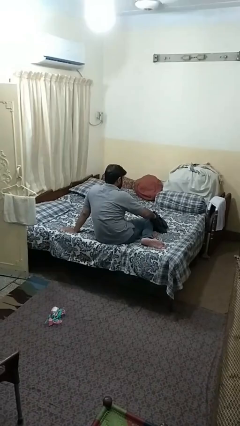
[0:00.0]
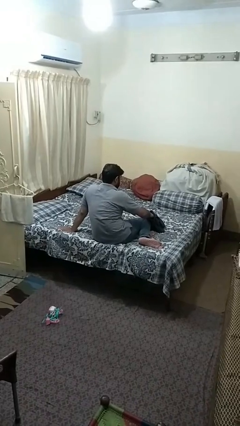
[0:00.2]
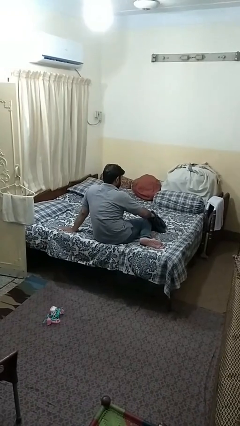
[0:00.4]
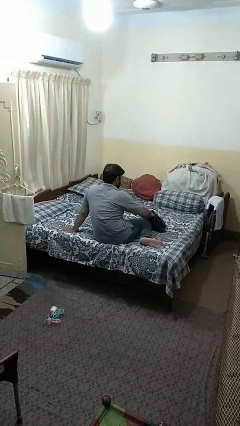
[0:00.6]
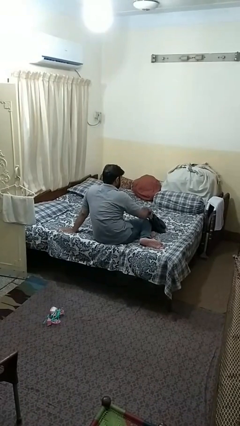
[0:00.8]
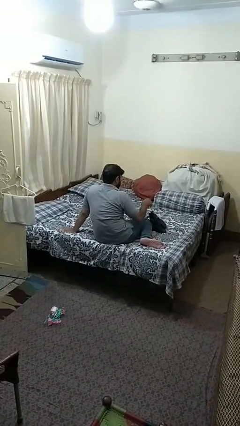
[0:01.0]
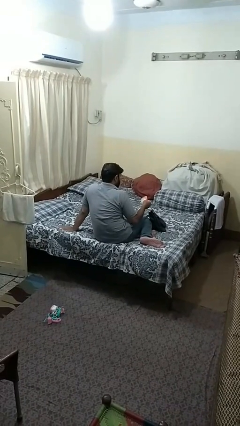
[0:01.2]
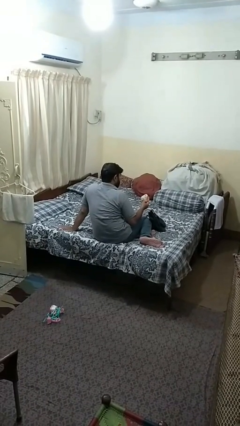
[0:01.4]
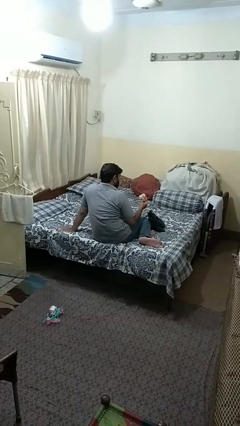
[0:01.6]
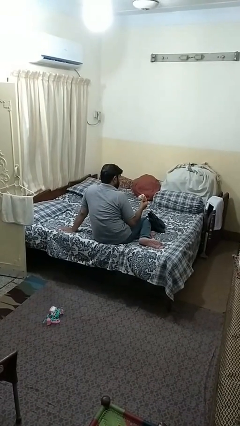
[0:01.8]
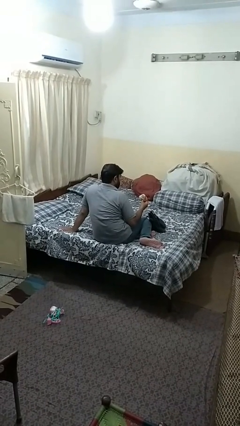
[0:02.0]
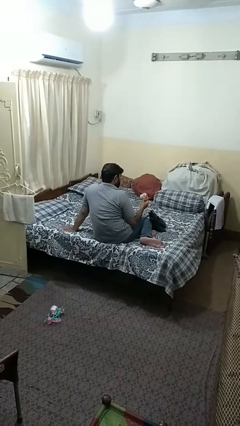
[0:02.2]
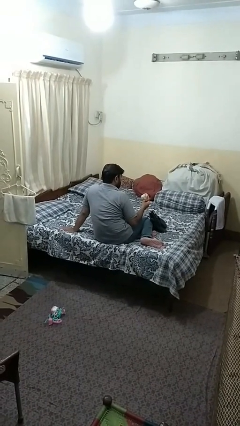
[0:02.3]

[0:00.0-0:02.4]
person takes object from purse

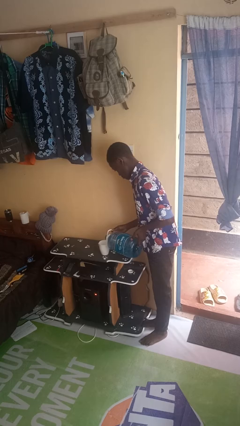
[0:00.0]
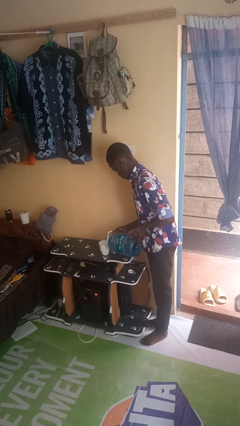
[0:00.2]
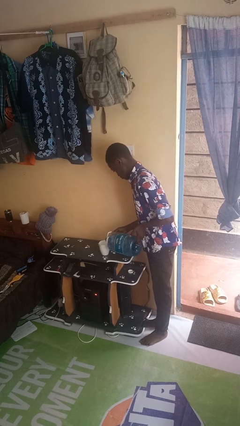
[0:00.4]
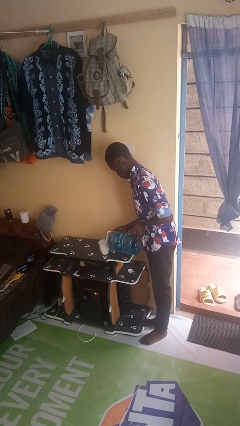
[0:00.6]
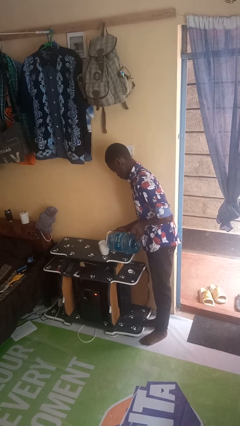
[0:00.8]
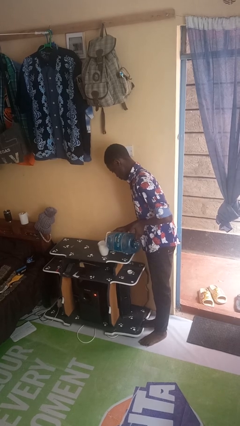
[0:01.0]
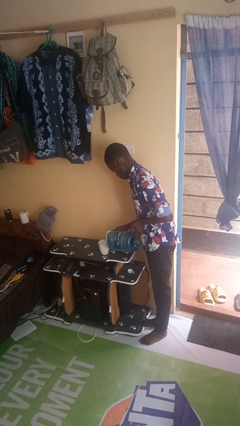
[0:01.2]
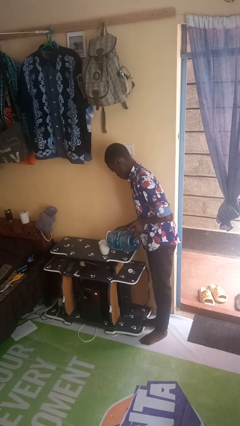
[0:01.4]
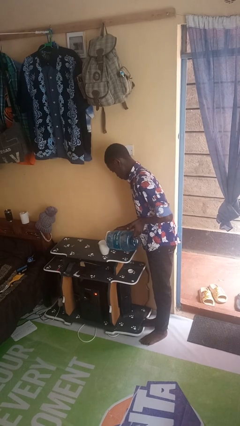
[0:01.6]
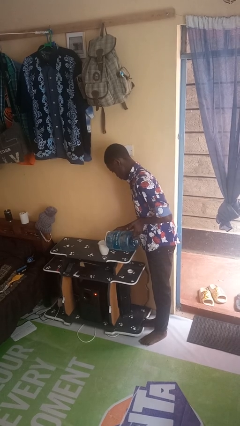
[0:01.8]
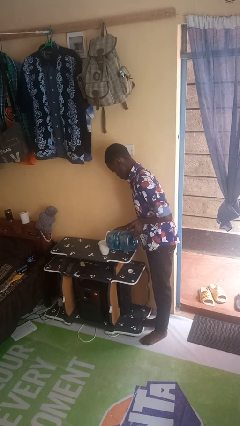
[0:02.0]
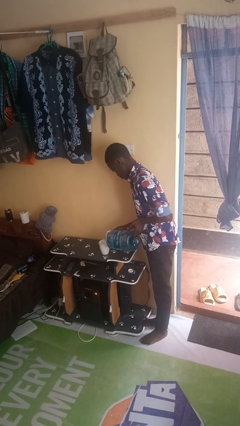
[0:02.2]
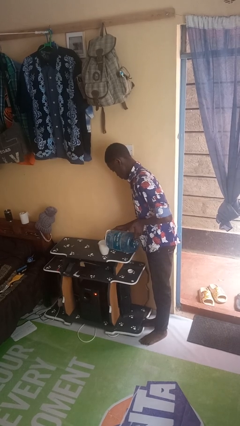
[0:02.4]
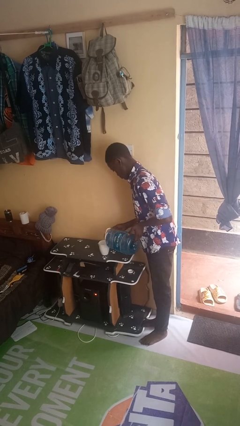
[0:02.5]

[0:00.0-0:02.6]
person pours liquid into cup

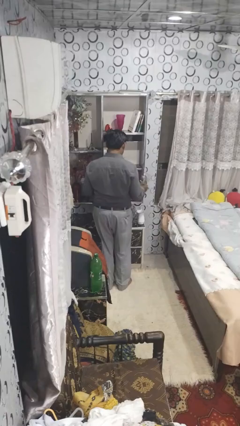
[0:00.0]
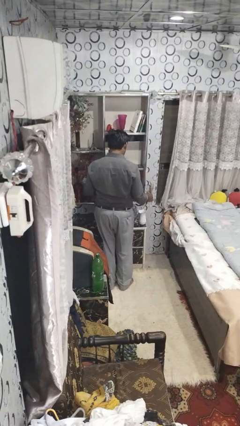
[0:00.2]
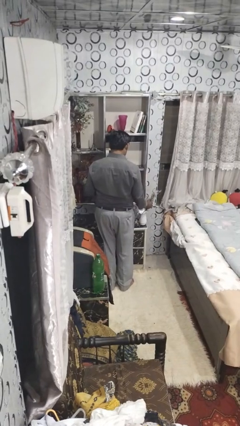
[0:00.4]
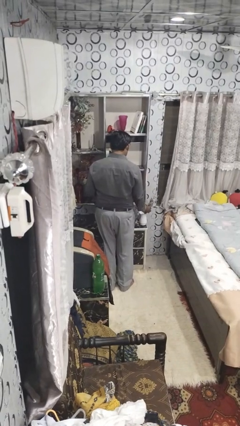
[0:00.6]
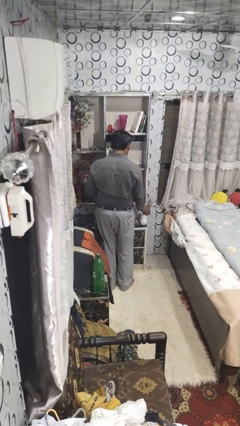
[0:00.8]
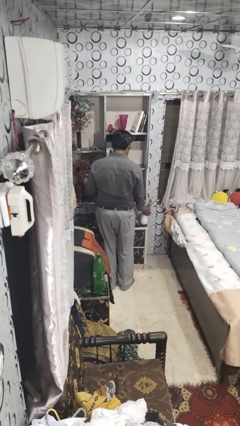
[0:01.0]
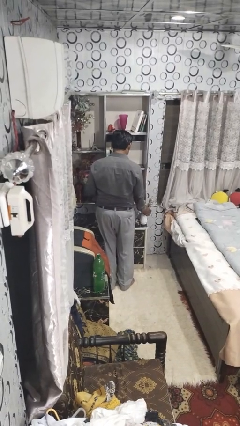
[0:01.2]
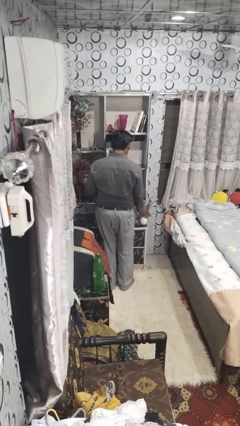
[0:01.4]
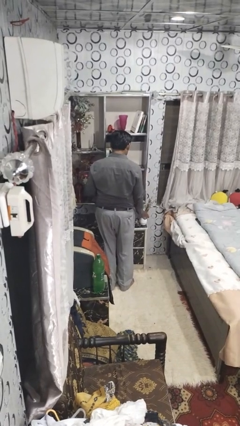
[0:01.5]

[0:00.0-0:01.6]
person arranges flowers in vase

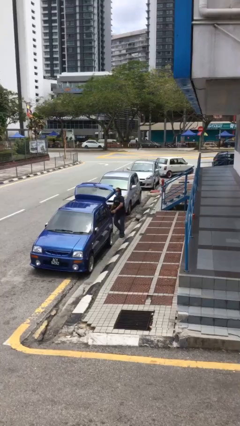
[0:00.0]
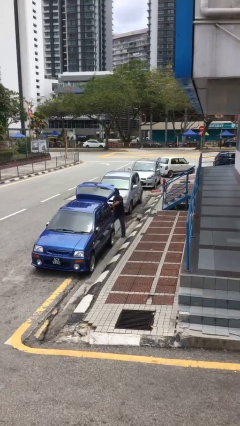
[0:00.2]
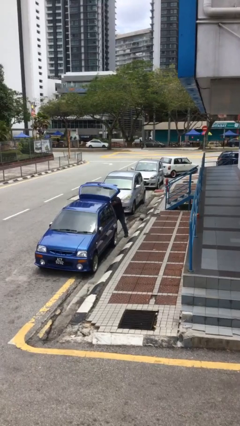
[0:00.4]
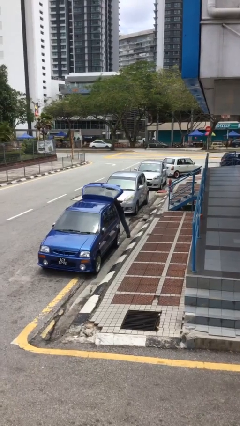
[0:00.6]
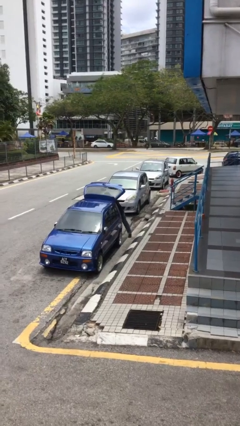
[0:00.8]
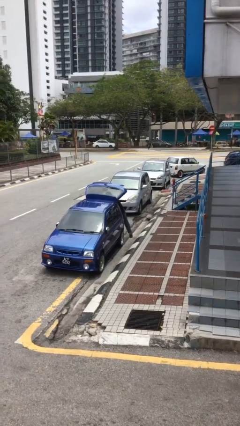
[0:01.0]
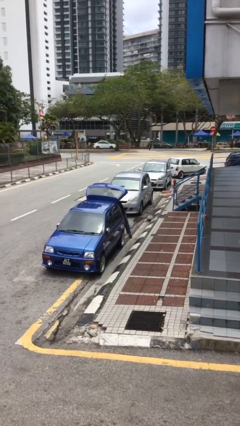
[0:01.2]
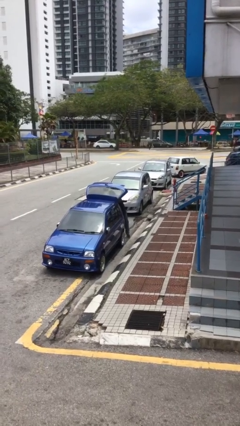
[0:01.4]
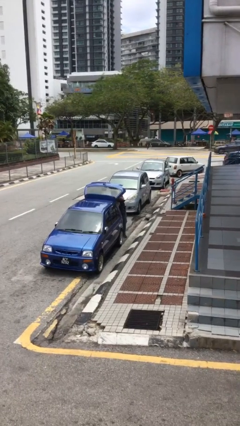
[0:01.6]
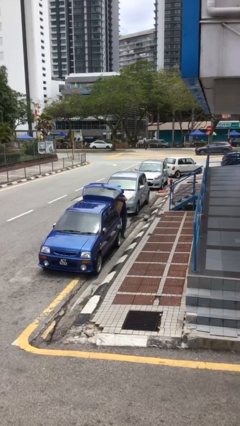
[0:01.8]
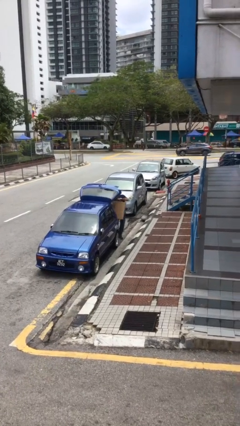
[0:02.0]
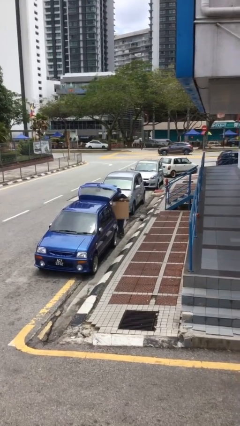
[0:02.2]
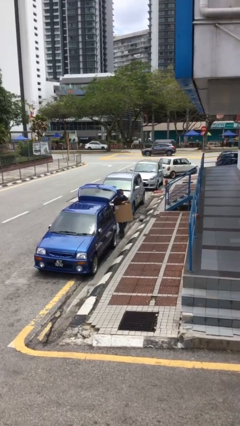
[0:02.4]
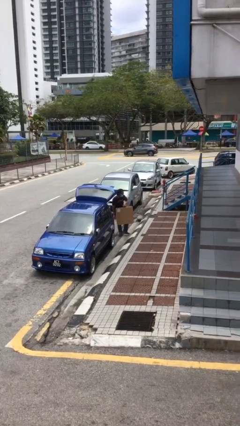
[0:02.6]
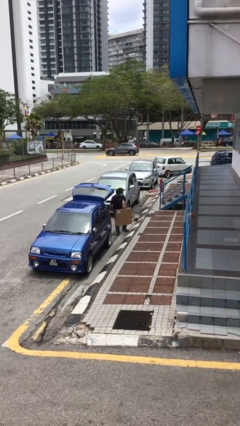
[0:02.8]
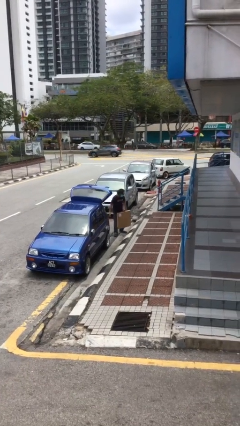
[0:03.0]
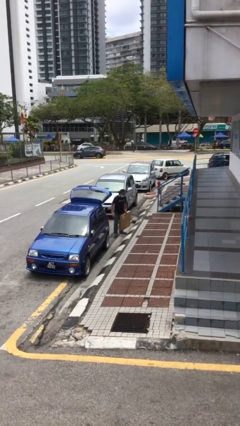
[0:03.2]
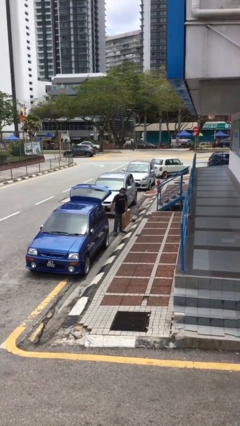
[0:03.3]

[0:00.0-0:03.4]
person unloads car

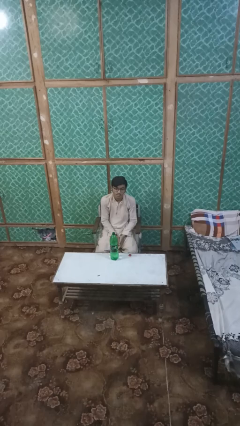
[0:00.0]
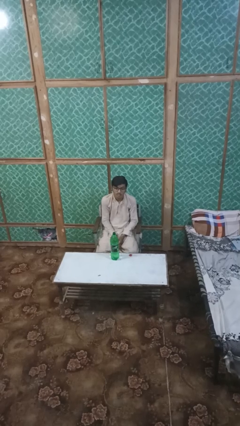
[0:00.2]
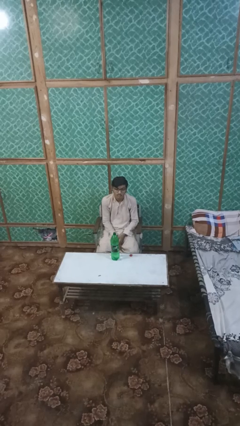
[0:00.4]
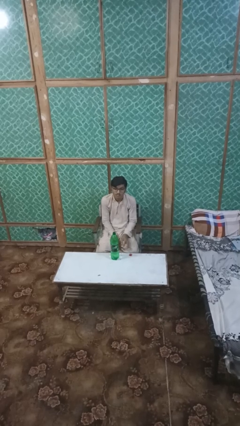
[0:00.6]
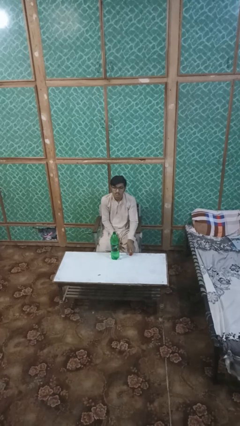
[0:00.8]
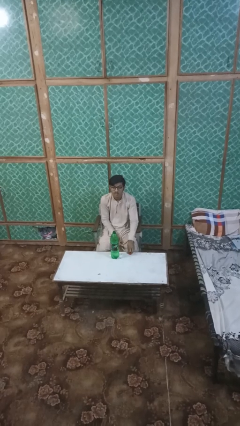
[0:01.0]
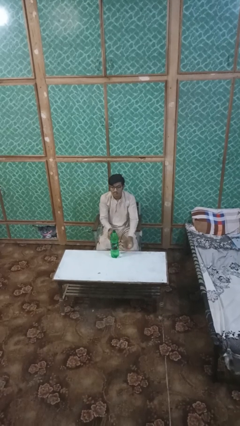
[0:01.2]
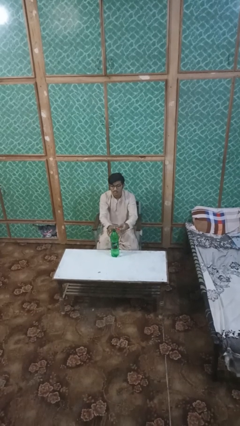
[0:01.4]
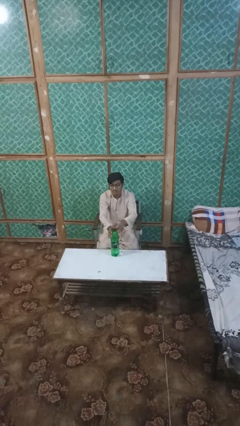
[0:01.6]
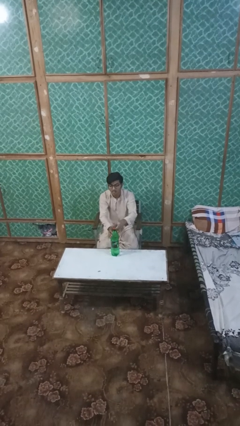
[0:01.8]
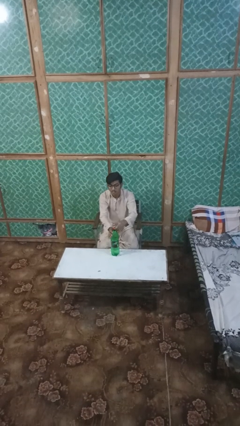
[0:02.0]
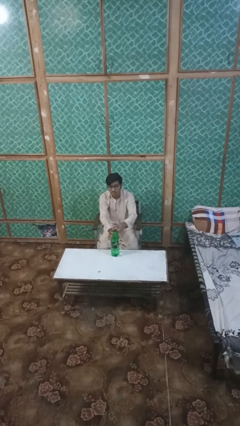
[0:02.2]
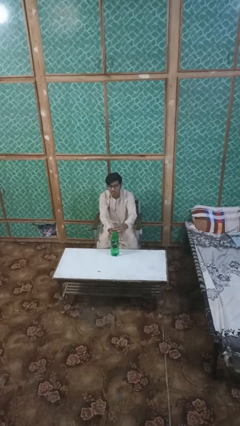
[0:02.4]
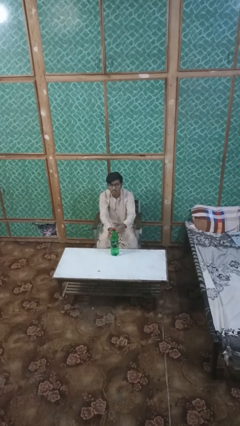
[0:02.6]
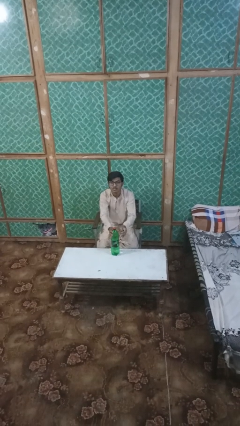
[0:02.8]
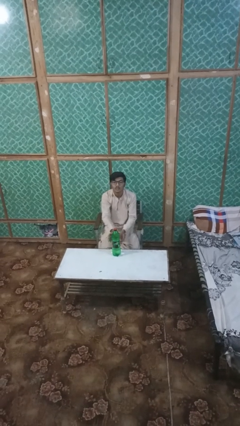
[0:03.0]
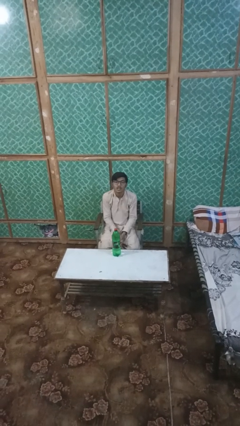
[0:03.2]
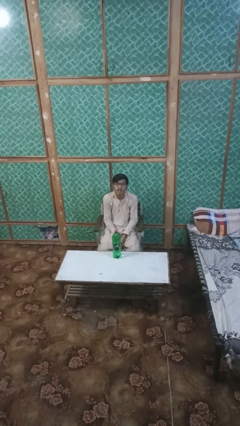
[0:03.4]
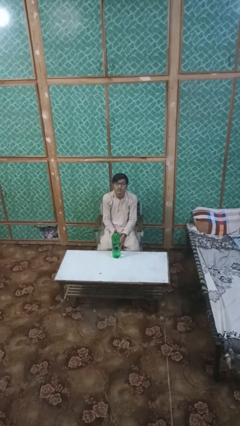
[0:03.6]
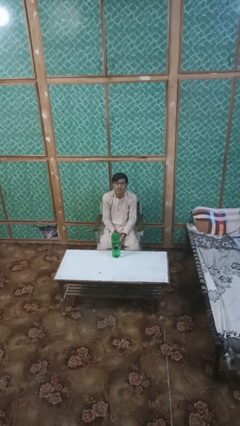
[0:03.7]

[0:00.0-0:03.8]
person screws lid to bottle

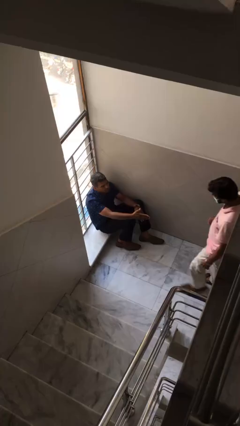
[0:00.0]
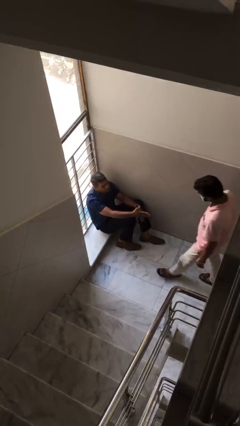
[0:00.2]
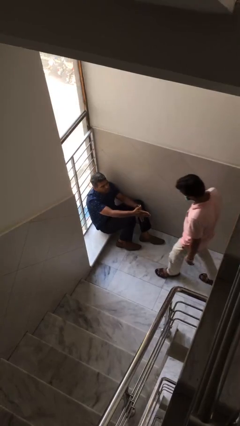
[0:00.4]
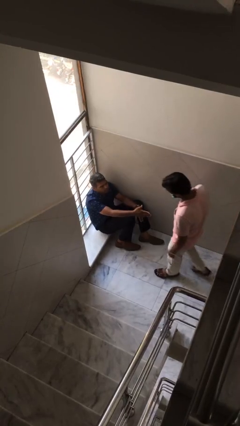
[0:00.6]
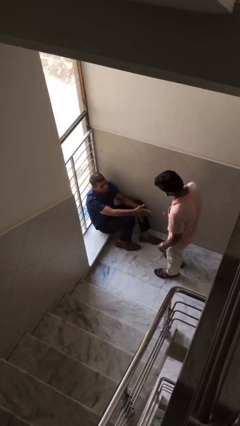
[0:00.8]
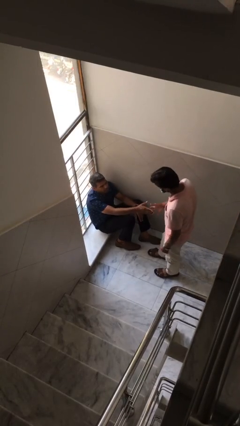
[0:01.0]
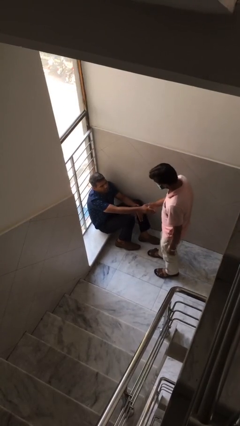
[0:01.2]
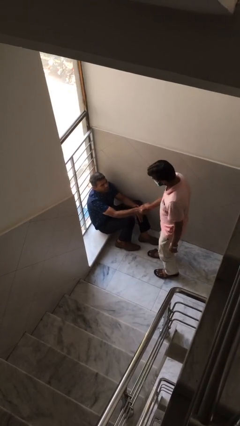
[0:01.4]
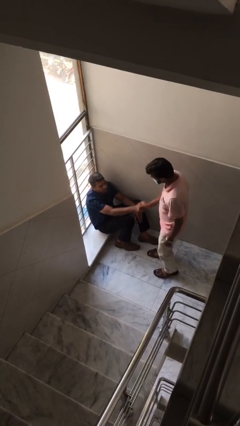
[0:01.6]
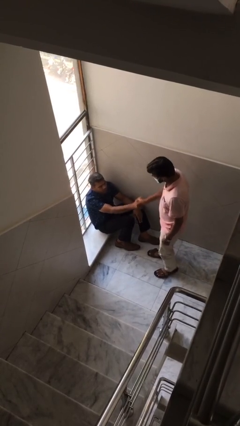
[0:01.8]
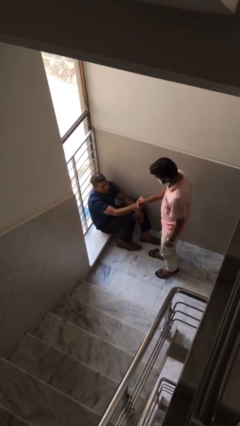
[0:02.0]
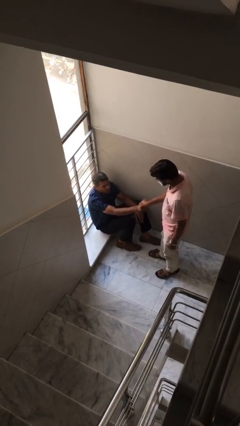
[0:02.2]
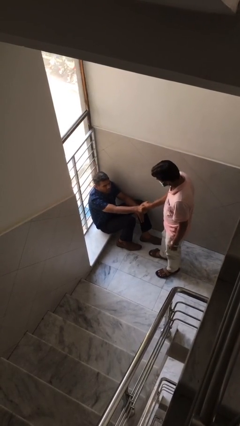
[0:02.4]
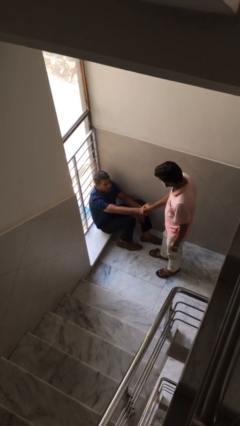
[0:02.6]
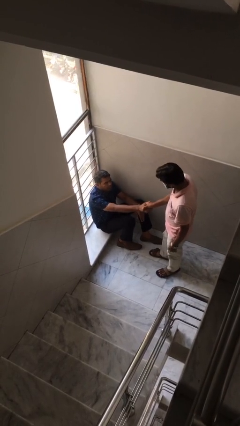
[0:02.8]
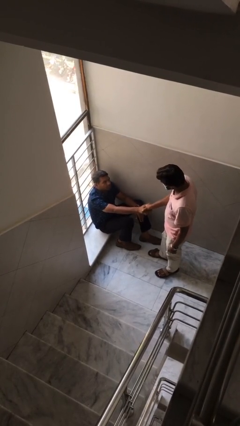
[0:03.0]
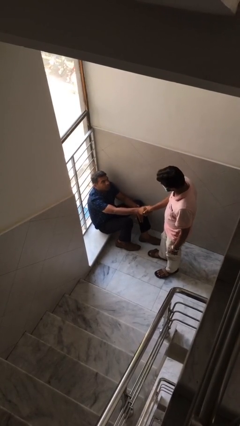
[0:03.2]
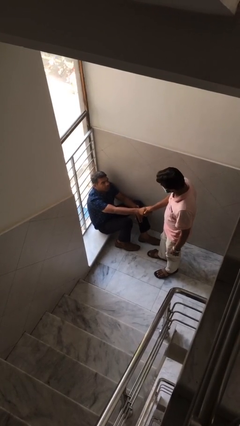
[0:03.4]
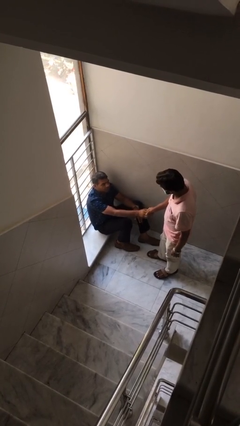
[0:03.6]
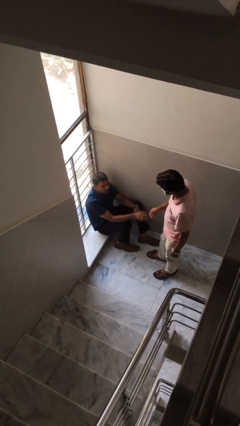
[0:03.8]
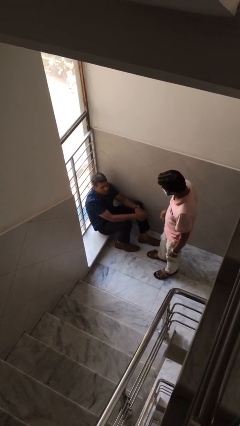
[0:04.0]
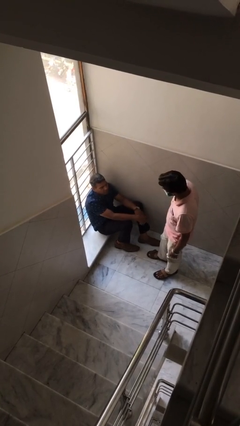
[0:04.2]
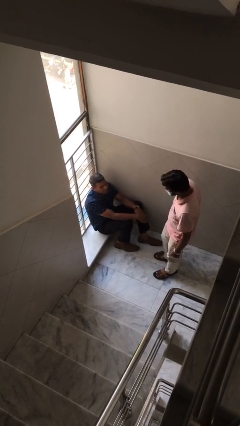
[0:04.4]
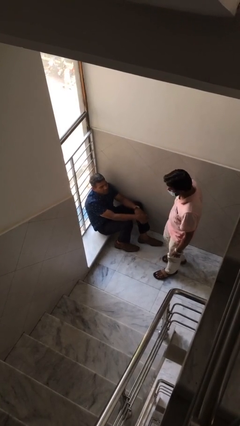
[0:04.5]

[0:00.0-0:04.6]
person shakes hand
